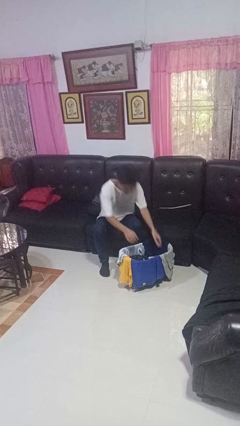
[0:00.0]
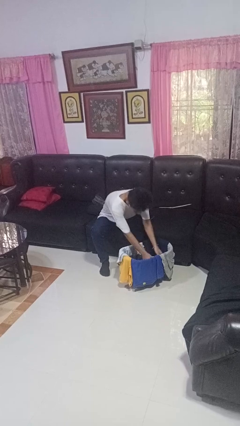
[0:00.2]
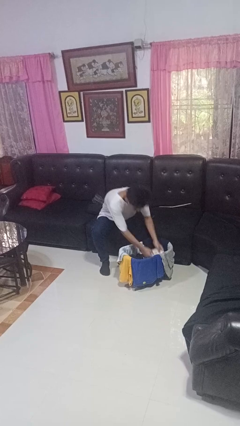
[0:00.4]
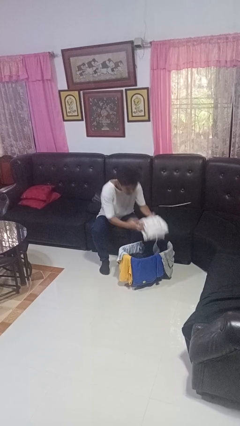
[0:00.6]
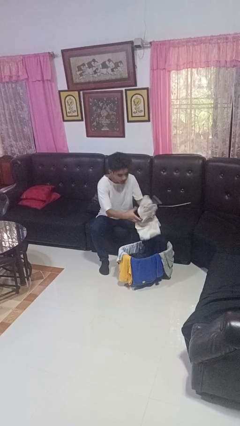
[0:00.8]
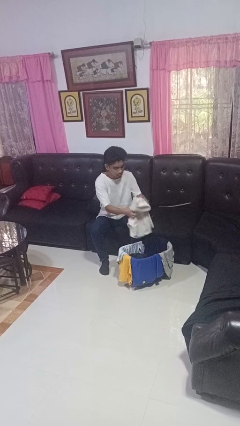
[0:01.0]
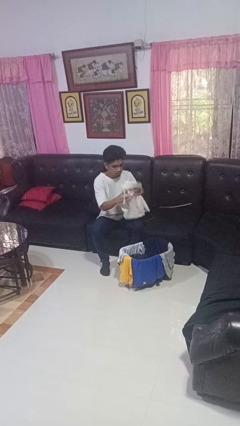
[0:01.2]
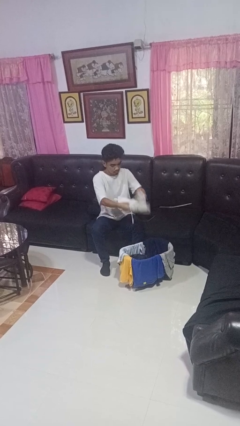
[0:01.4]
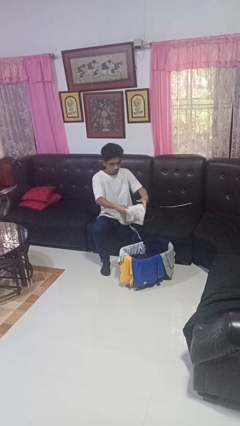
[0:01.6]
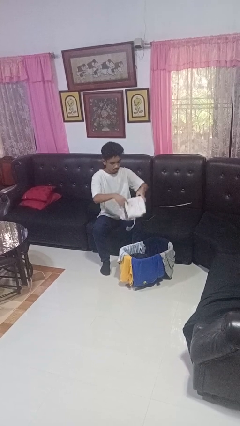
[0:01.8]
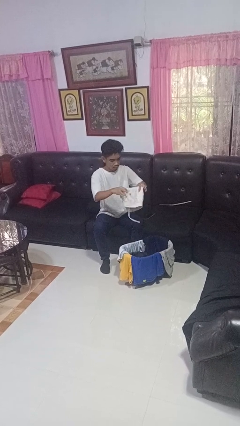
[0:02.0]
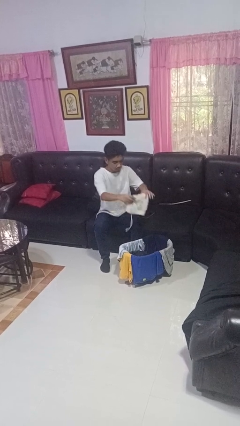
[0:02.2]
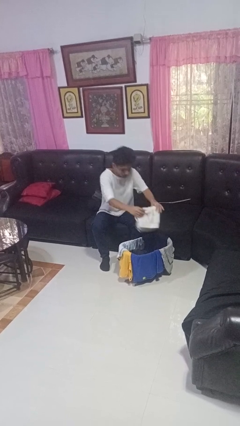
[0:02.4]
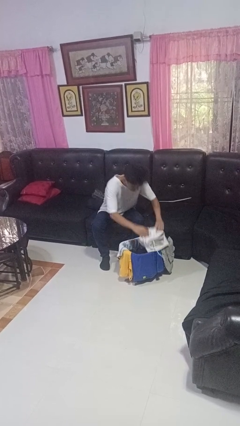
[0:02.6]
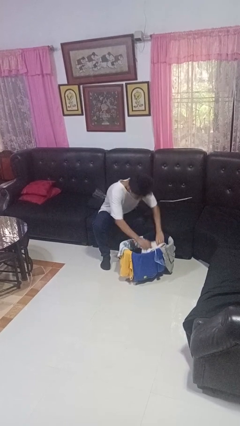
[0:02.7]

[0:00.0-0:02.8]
person folds pants

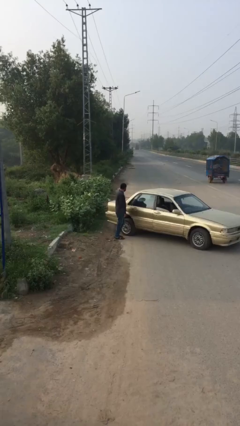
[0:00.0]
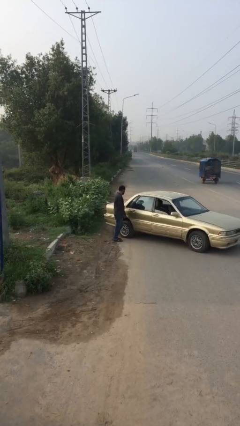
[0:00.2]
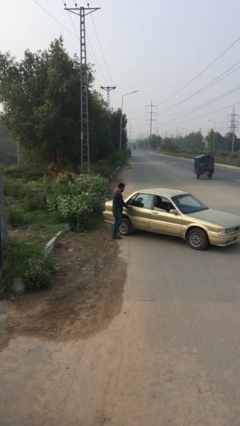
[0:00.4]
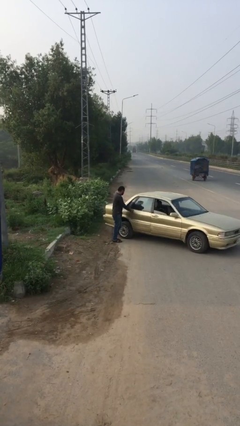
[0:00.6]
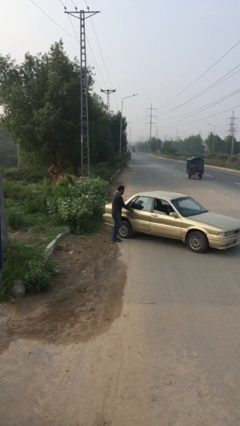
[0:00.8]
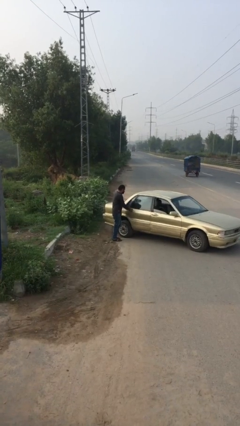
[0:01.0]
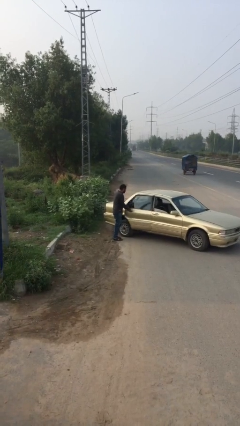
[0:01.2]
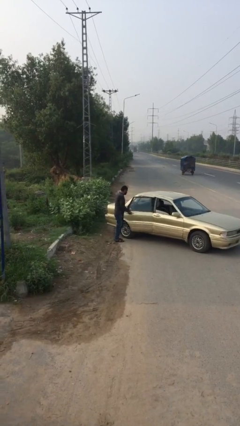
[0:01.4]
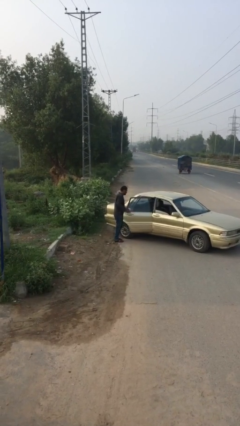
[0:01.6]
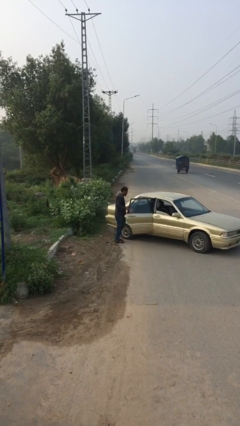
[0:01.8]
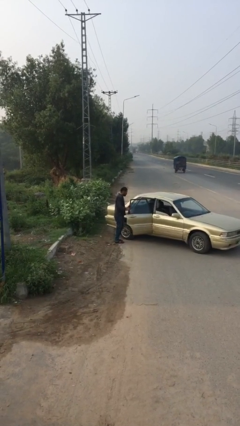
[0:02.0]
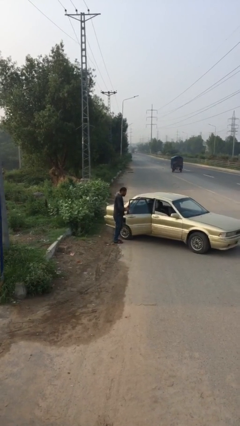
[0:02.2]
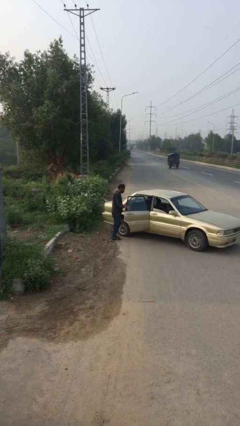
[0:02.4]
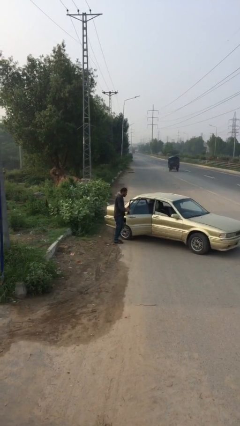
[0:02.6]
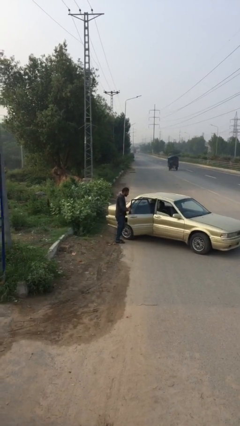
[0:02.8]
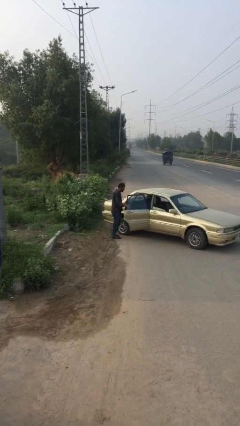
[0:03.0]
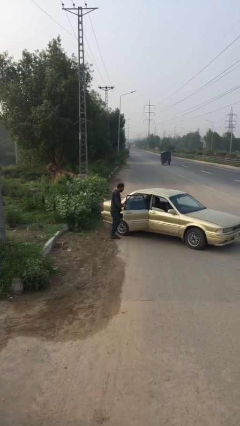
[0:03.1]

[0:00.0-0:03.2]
person opens car door

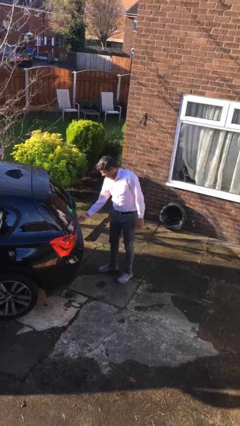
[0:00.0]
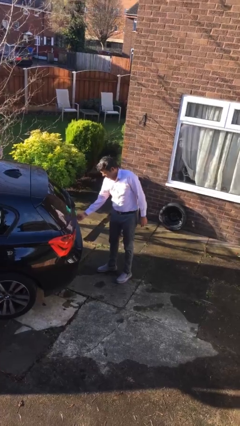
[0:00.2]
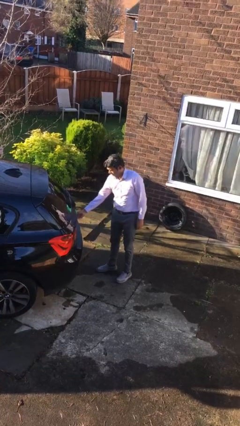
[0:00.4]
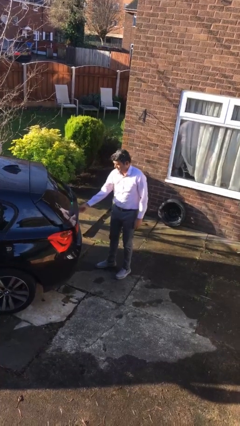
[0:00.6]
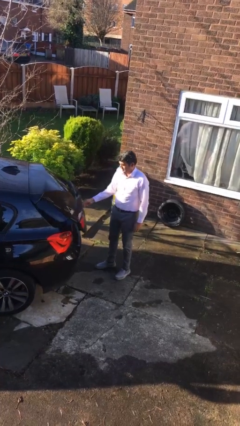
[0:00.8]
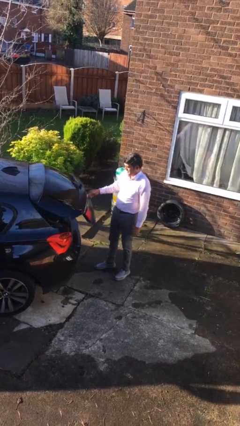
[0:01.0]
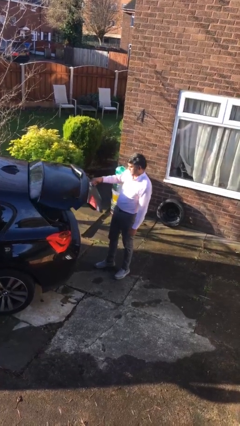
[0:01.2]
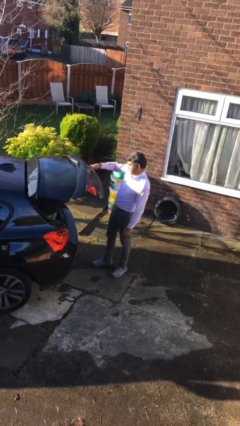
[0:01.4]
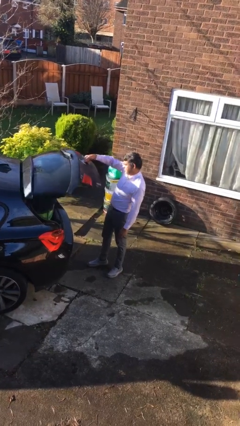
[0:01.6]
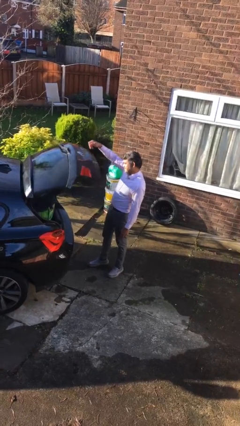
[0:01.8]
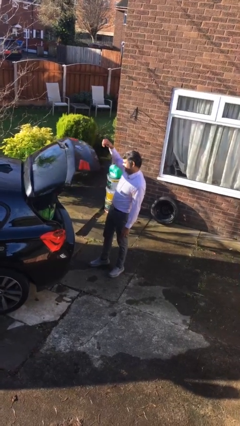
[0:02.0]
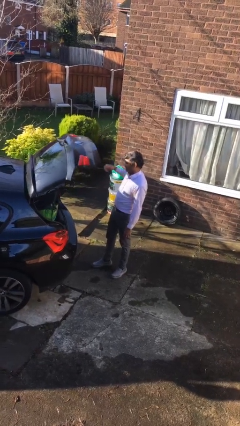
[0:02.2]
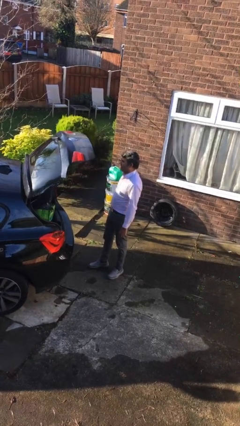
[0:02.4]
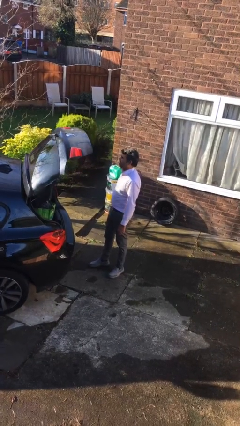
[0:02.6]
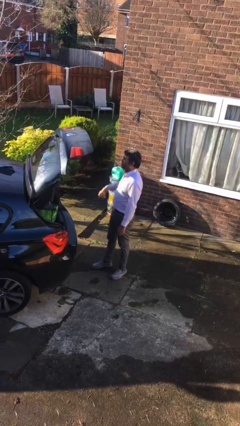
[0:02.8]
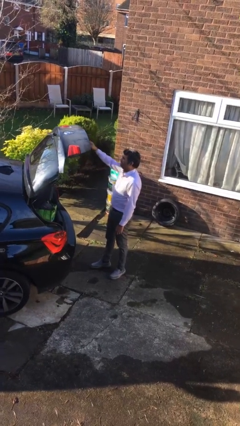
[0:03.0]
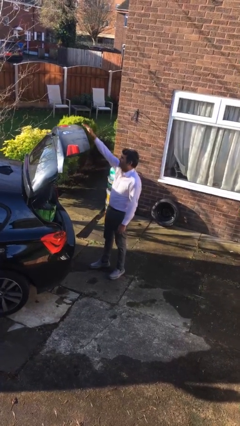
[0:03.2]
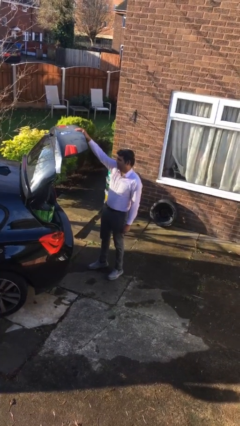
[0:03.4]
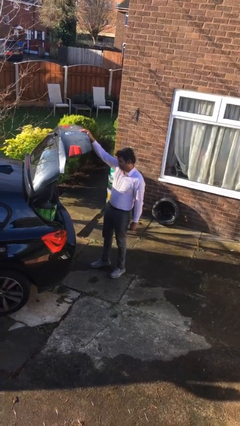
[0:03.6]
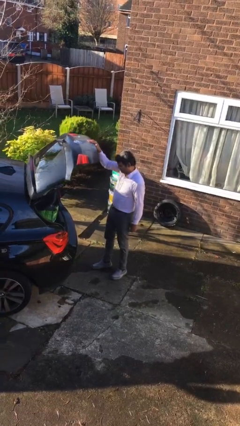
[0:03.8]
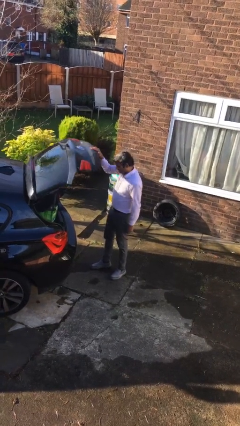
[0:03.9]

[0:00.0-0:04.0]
person opens car trunk

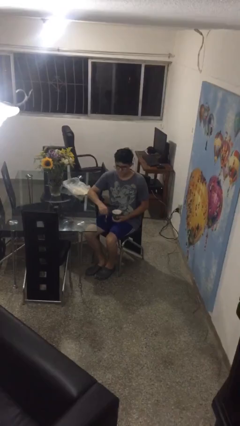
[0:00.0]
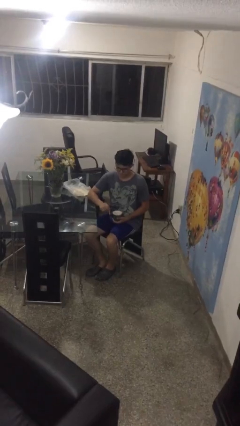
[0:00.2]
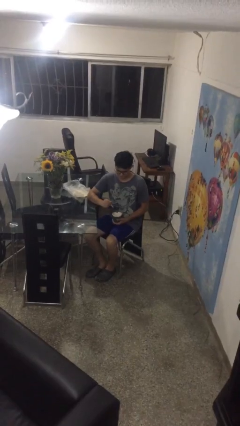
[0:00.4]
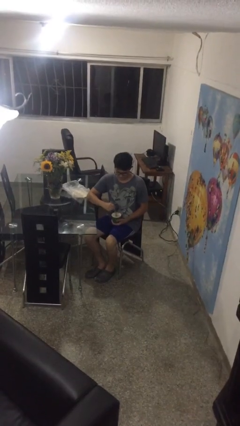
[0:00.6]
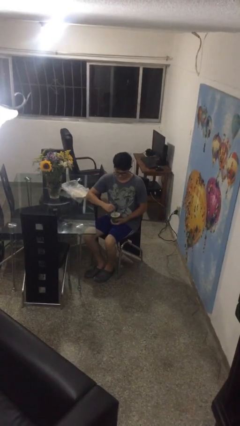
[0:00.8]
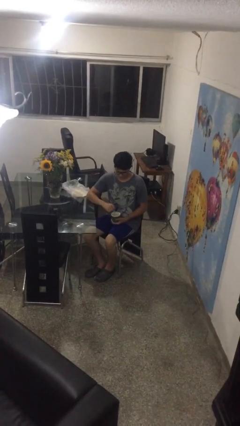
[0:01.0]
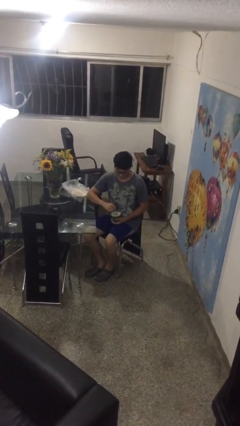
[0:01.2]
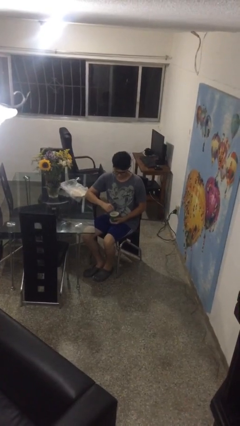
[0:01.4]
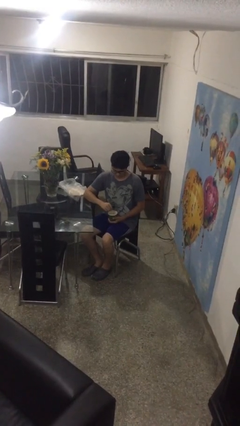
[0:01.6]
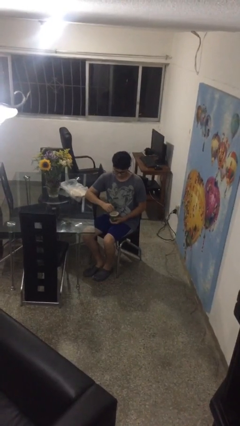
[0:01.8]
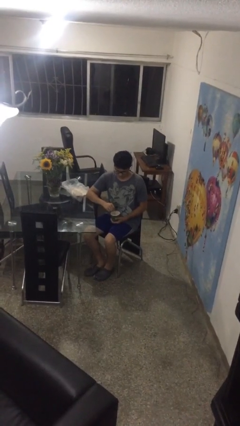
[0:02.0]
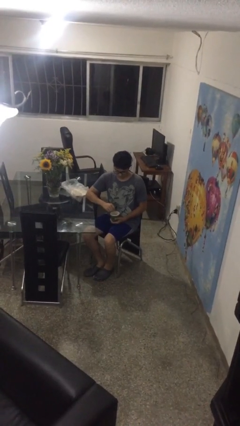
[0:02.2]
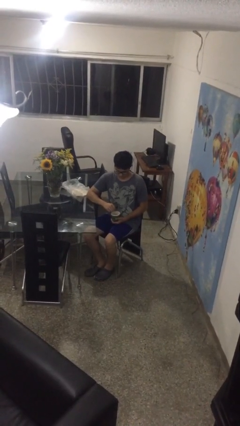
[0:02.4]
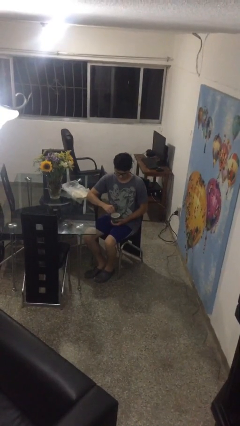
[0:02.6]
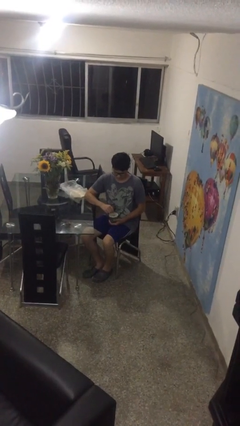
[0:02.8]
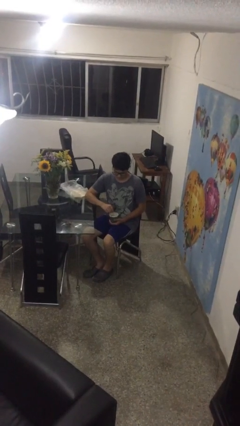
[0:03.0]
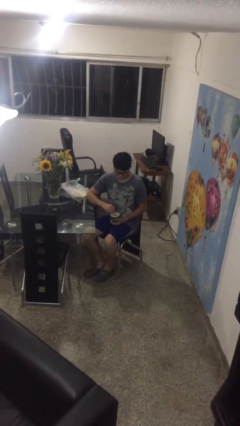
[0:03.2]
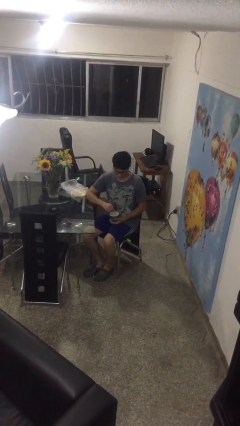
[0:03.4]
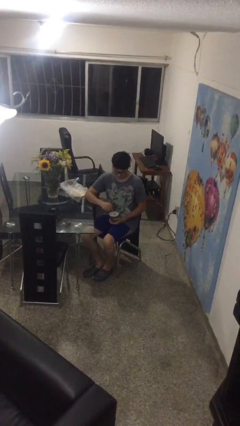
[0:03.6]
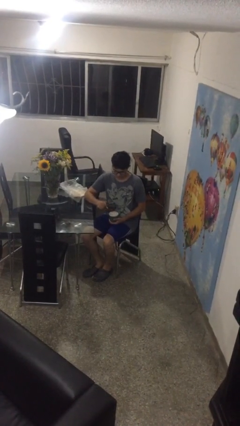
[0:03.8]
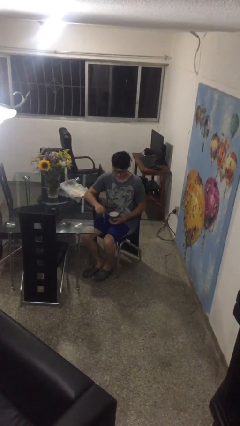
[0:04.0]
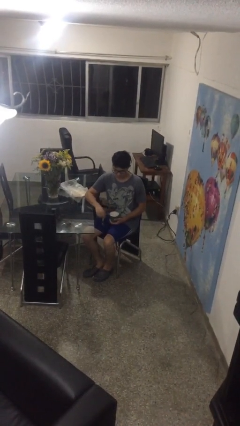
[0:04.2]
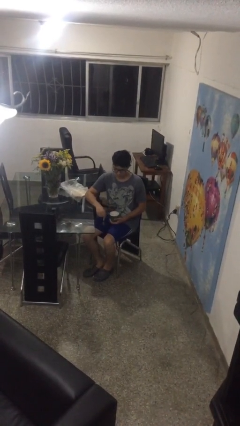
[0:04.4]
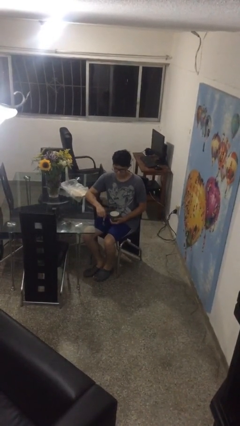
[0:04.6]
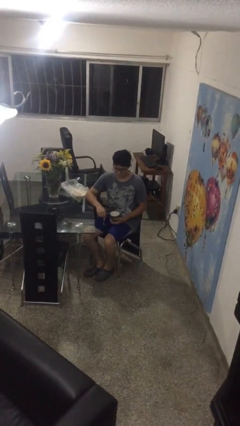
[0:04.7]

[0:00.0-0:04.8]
person stirs mug

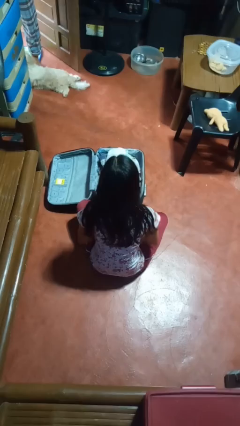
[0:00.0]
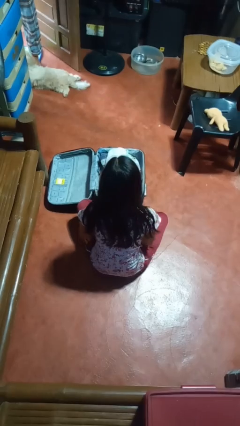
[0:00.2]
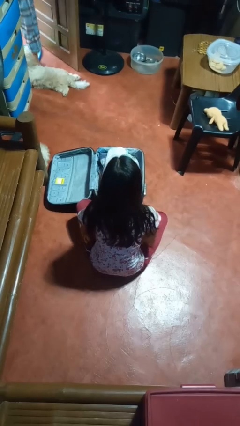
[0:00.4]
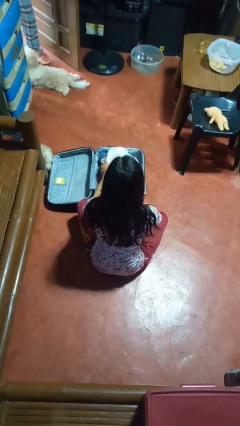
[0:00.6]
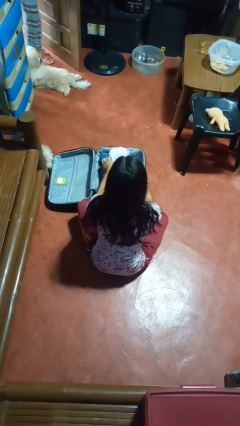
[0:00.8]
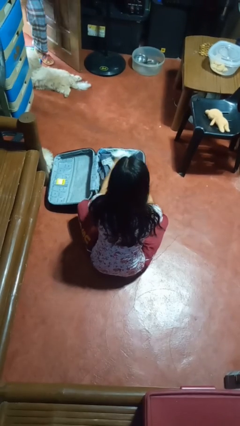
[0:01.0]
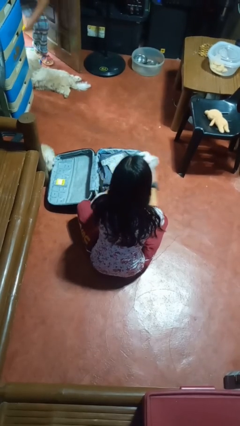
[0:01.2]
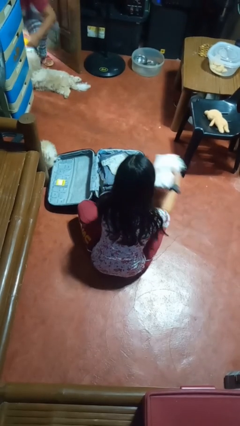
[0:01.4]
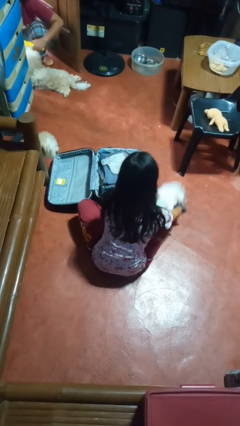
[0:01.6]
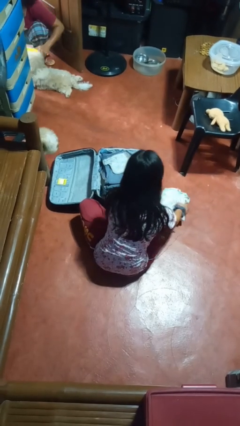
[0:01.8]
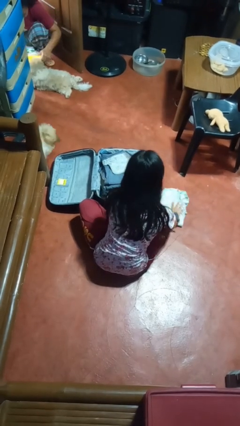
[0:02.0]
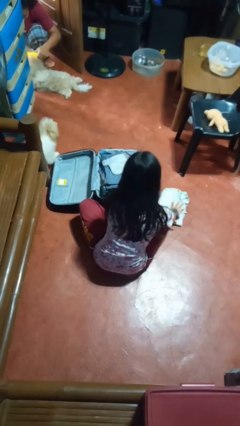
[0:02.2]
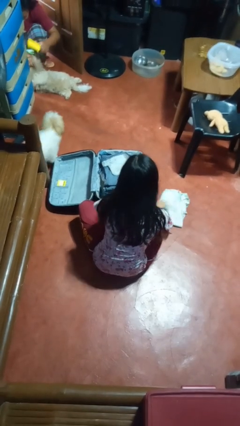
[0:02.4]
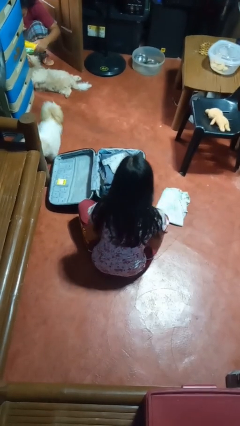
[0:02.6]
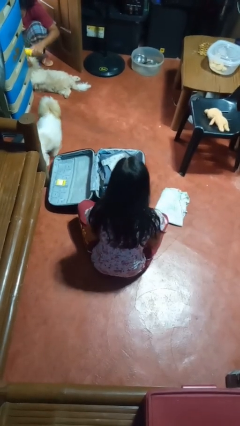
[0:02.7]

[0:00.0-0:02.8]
person unloads clothes from suitcase
